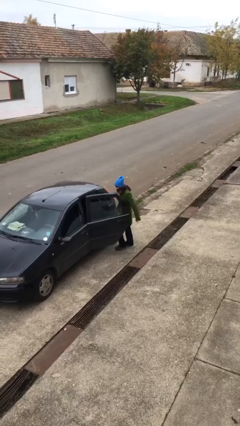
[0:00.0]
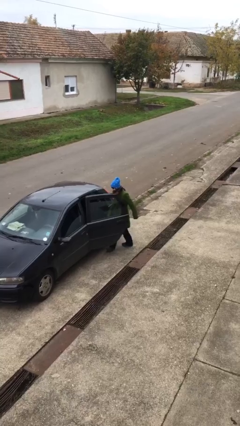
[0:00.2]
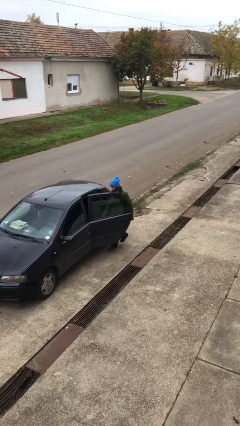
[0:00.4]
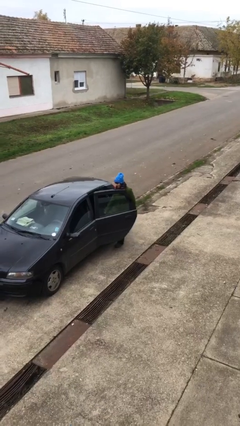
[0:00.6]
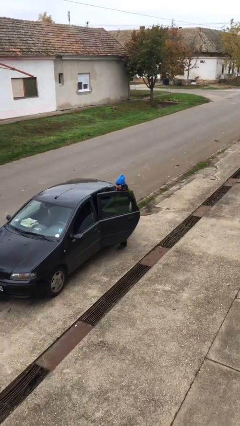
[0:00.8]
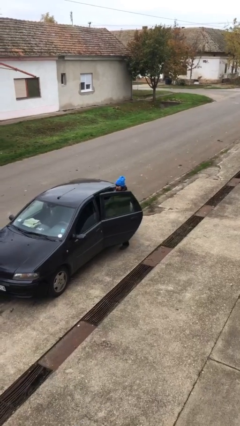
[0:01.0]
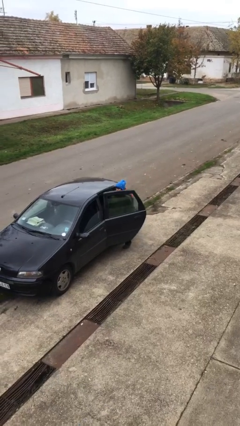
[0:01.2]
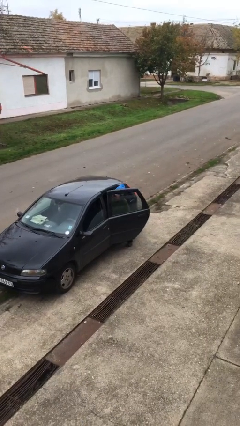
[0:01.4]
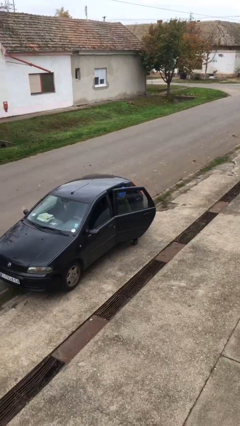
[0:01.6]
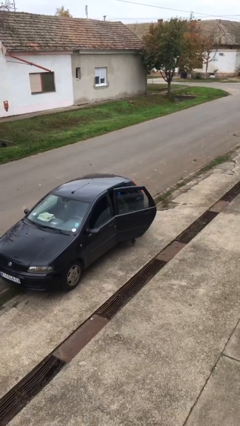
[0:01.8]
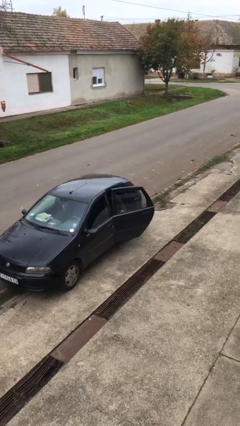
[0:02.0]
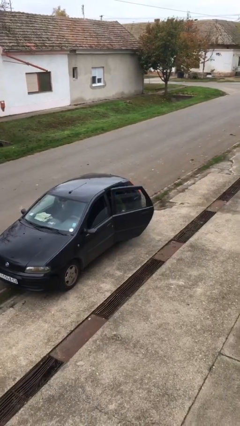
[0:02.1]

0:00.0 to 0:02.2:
person enters car

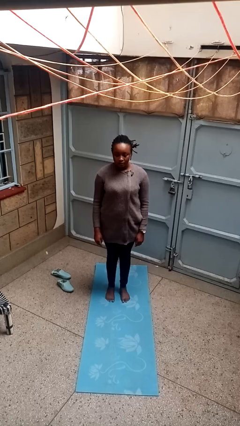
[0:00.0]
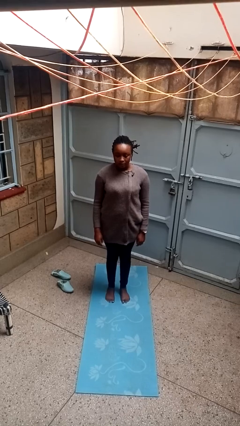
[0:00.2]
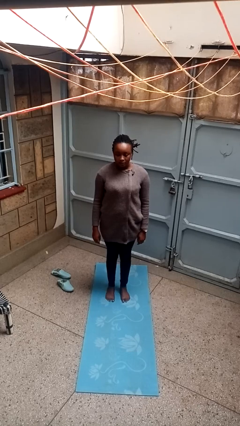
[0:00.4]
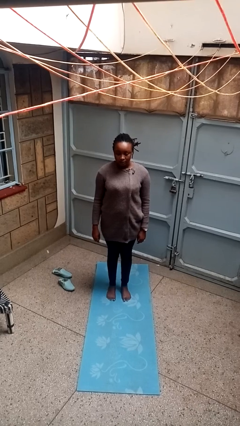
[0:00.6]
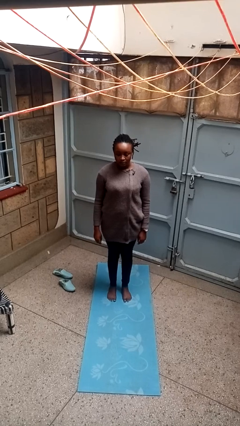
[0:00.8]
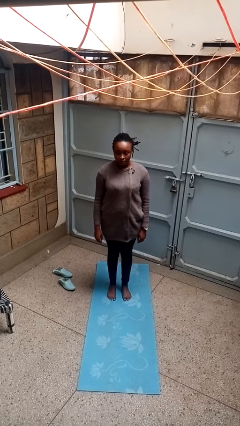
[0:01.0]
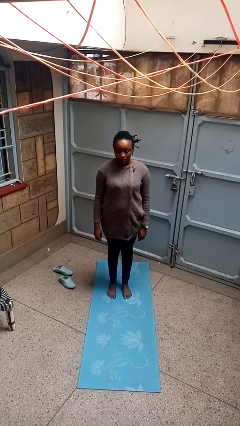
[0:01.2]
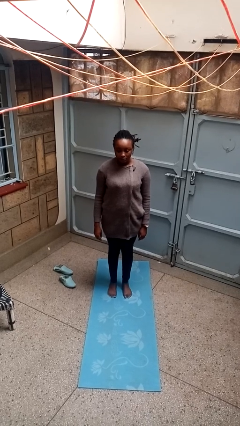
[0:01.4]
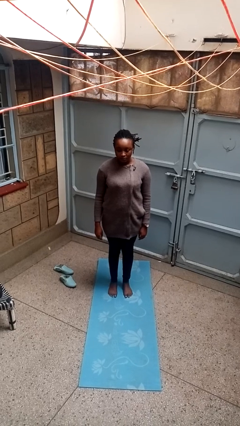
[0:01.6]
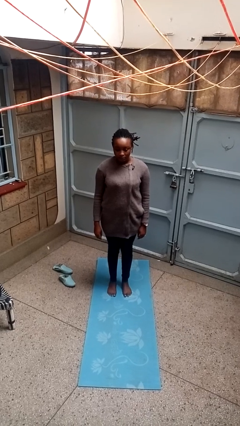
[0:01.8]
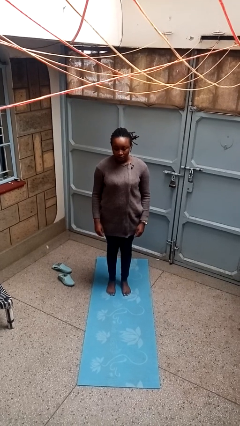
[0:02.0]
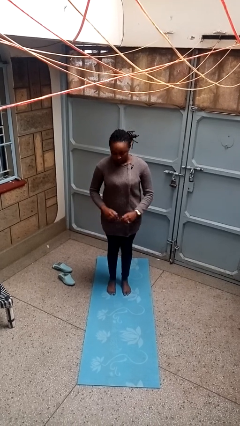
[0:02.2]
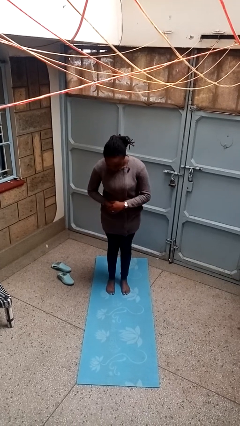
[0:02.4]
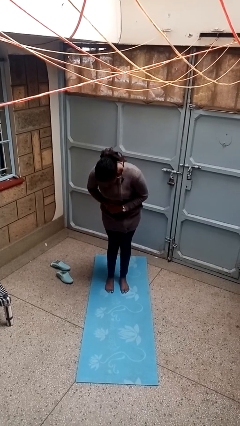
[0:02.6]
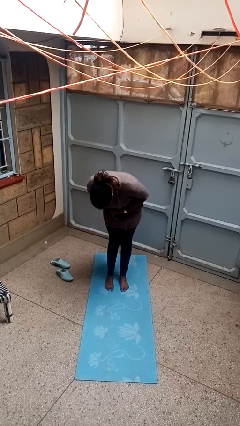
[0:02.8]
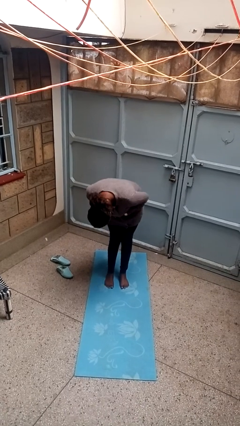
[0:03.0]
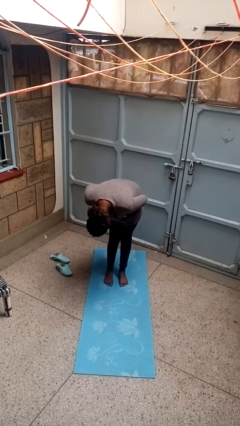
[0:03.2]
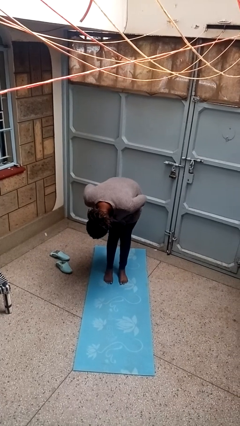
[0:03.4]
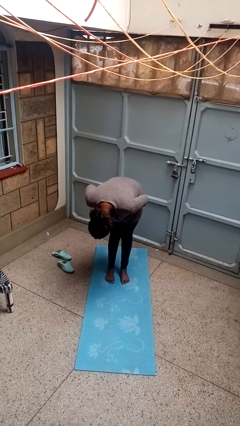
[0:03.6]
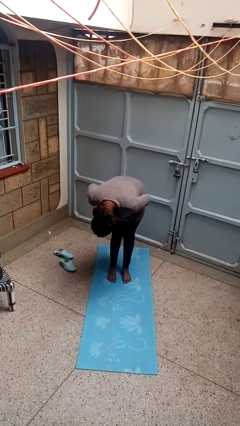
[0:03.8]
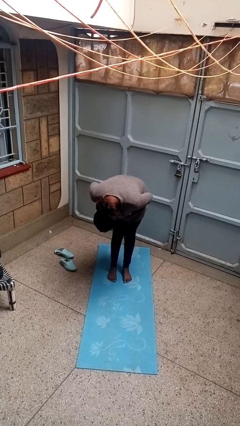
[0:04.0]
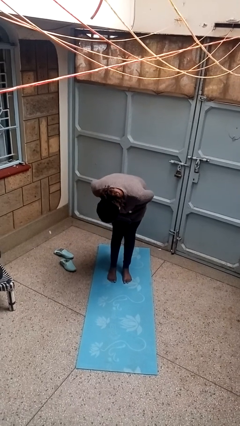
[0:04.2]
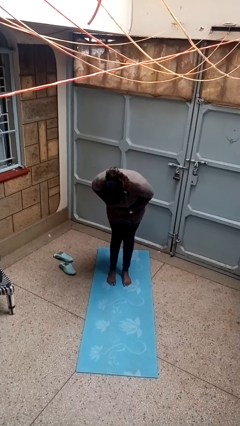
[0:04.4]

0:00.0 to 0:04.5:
person bows

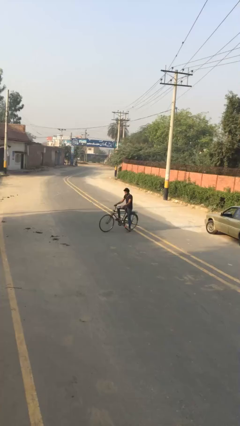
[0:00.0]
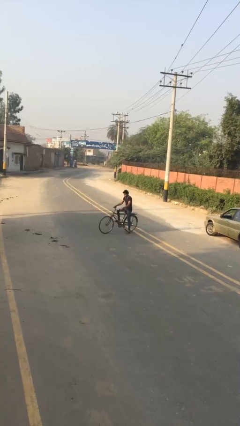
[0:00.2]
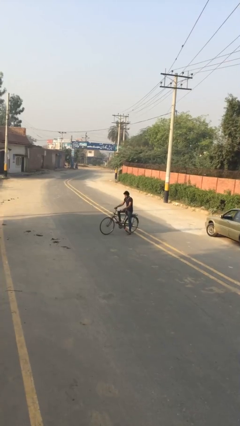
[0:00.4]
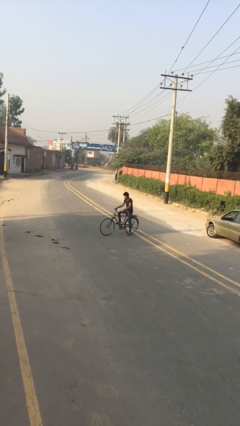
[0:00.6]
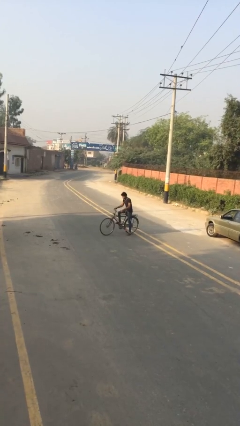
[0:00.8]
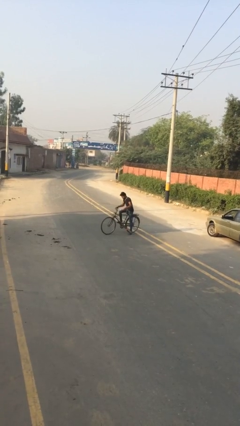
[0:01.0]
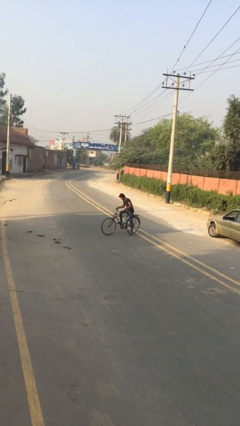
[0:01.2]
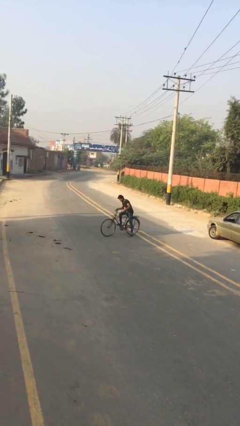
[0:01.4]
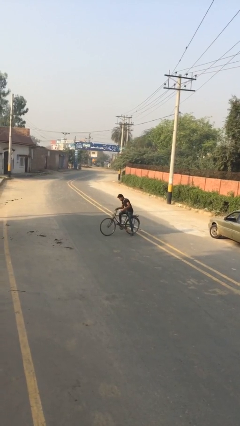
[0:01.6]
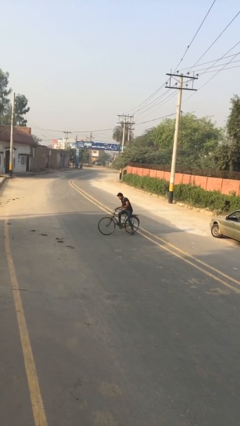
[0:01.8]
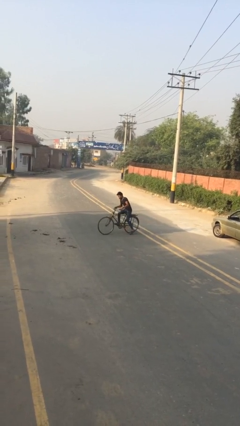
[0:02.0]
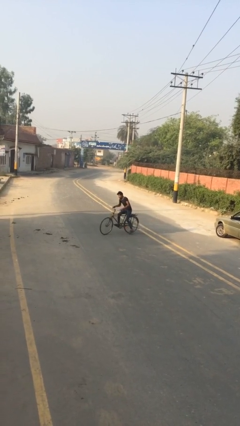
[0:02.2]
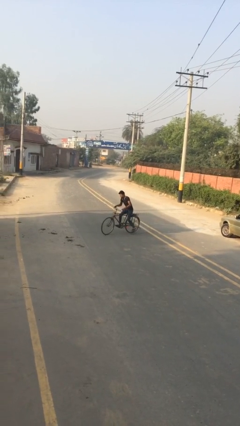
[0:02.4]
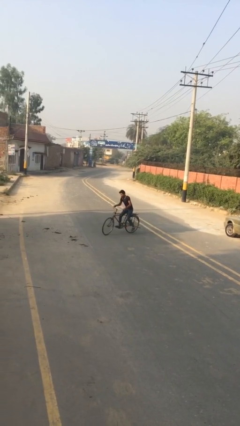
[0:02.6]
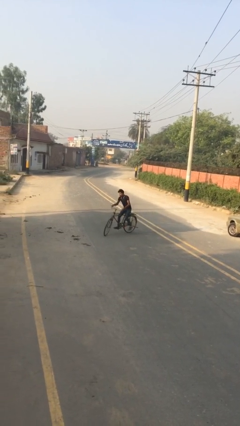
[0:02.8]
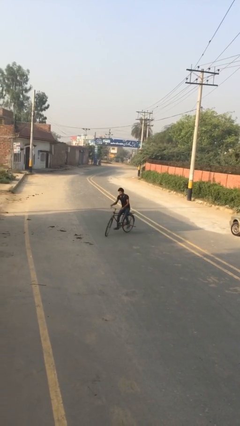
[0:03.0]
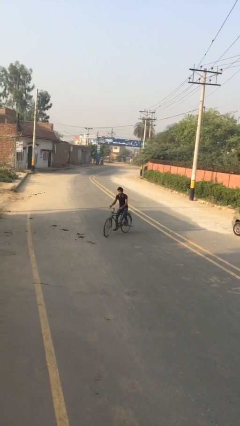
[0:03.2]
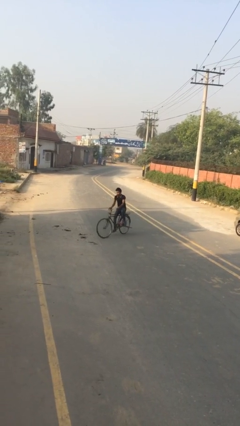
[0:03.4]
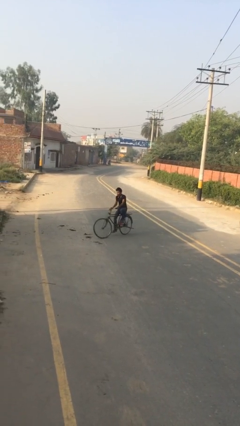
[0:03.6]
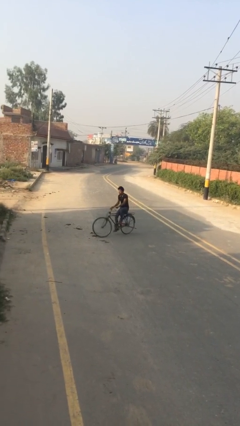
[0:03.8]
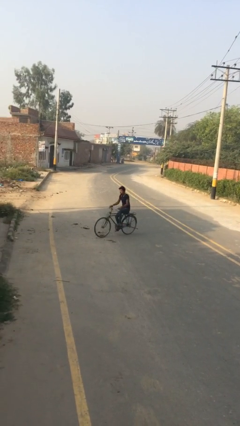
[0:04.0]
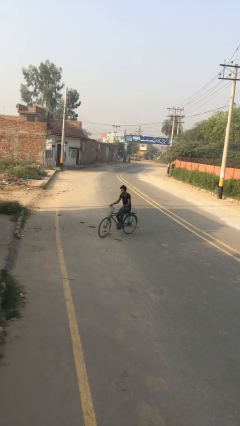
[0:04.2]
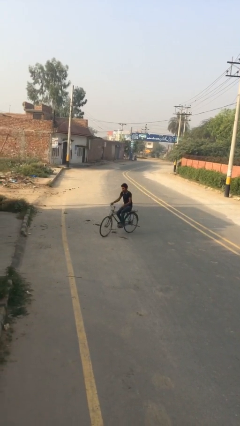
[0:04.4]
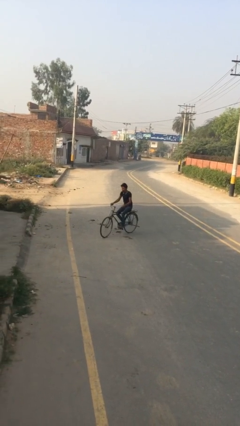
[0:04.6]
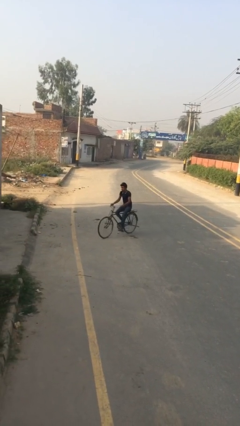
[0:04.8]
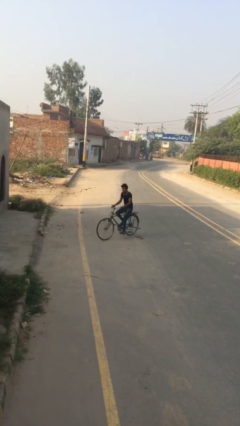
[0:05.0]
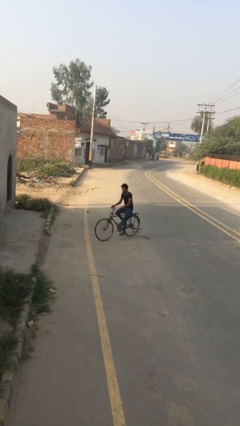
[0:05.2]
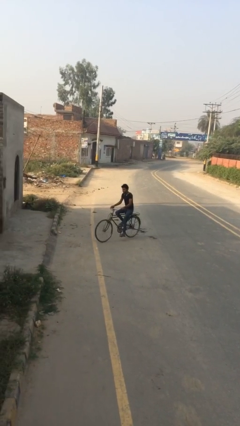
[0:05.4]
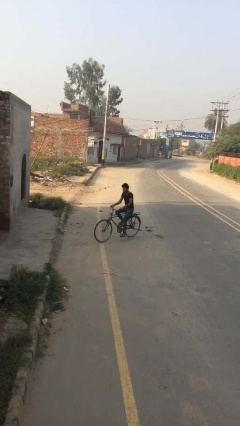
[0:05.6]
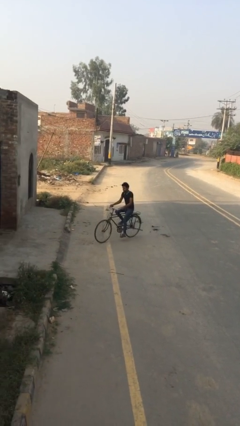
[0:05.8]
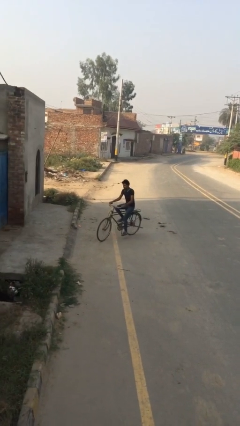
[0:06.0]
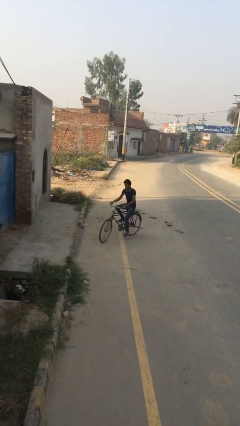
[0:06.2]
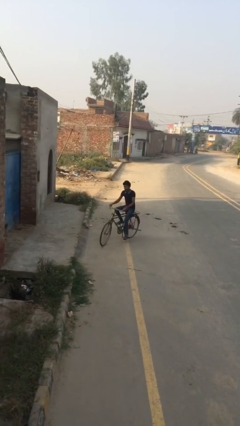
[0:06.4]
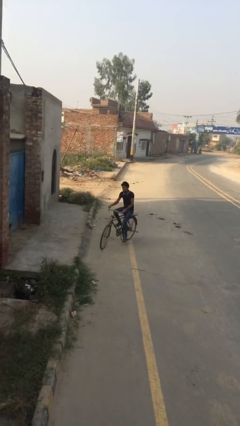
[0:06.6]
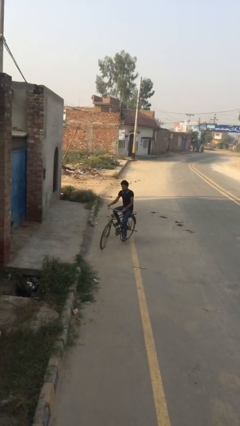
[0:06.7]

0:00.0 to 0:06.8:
person rides bicycle

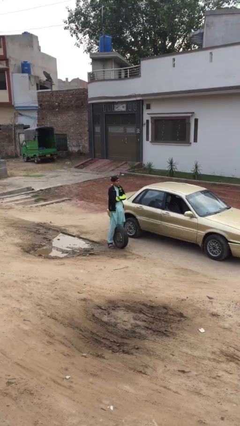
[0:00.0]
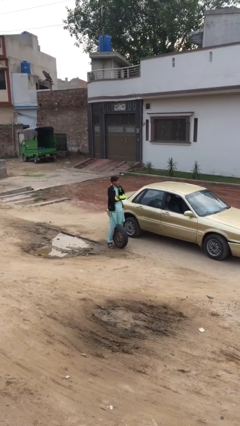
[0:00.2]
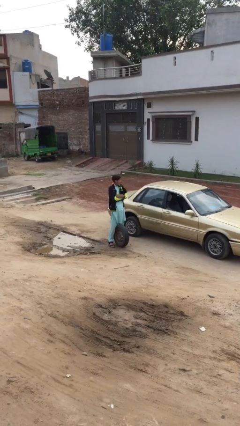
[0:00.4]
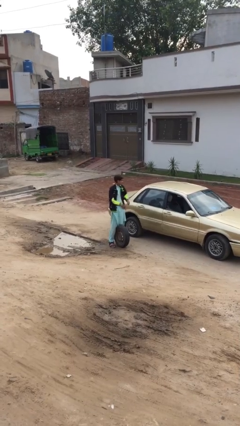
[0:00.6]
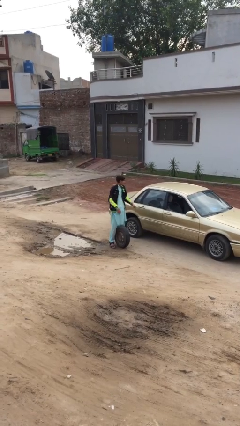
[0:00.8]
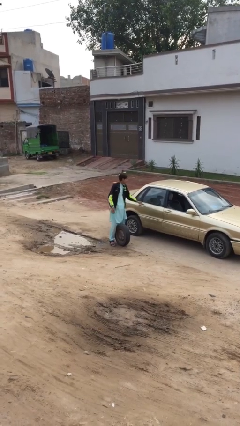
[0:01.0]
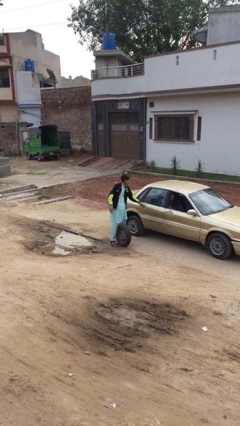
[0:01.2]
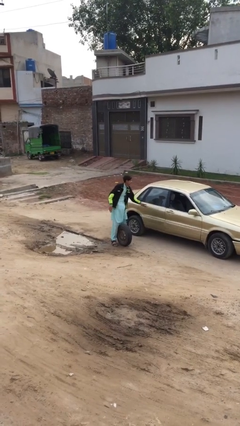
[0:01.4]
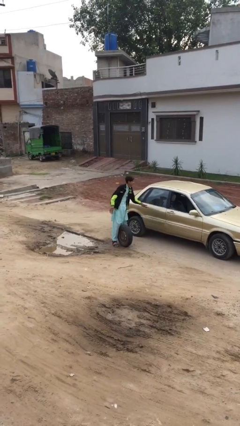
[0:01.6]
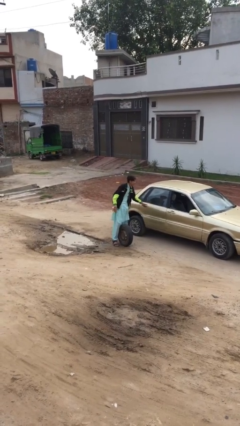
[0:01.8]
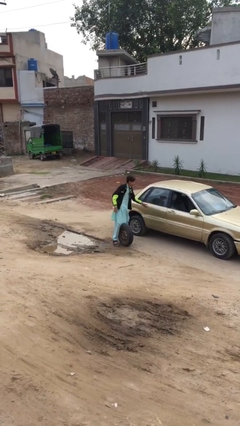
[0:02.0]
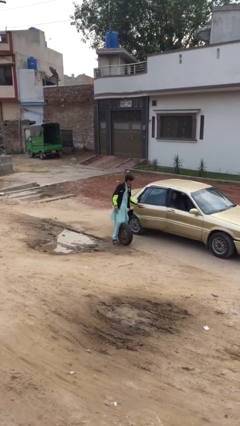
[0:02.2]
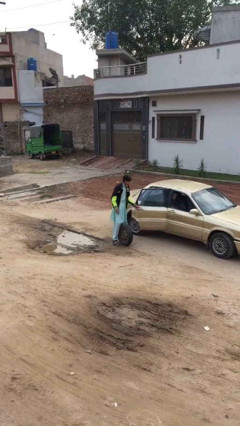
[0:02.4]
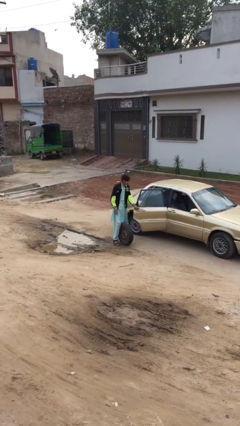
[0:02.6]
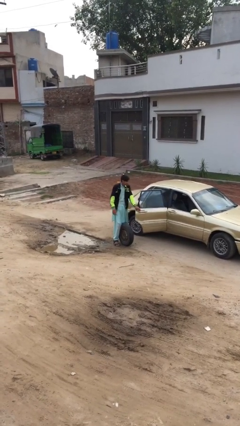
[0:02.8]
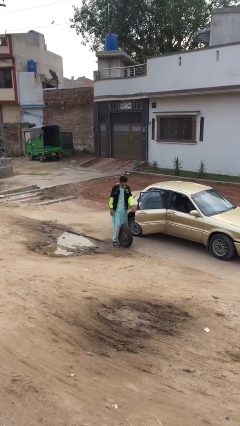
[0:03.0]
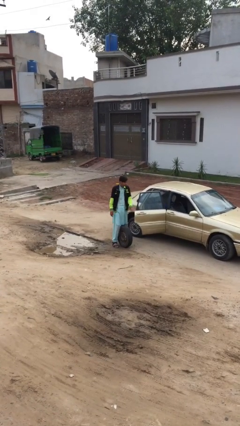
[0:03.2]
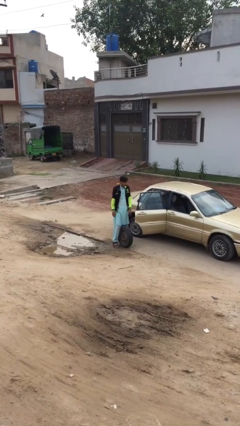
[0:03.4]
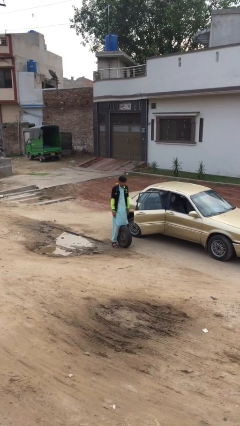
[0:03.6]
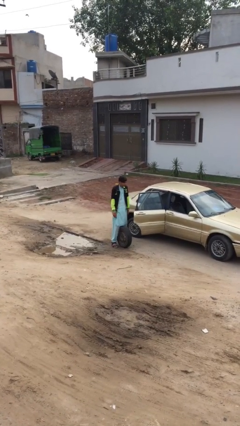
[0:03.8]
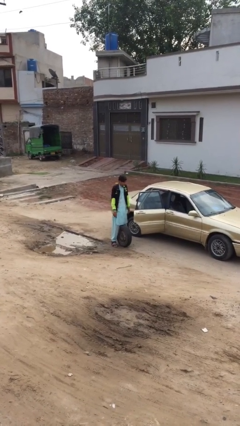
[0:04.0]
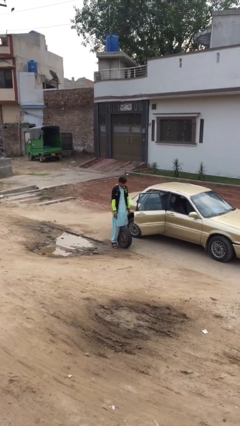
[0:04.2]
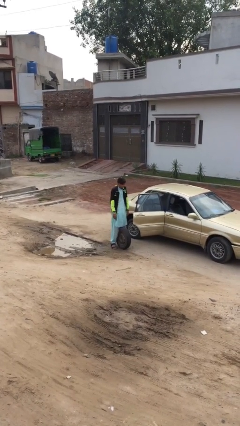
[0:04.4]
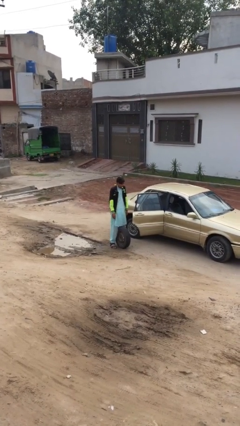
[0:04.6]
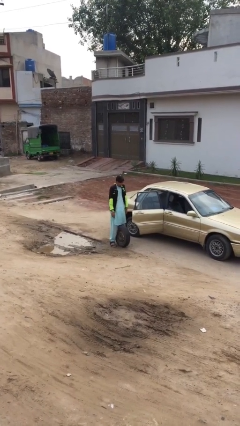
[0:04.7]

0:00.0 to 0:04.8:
person opens car door
